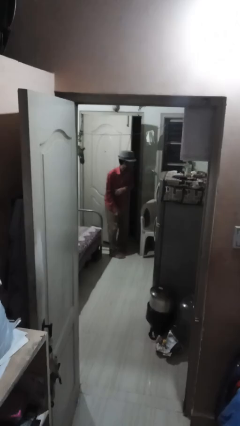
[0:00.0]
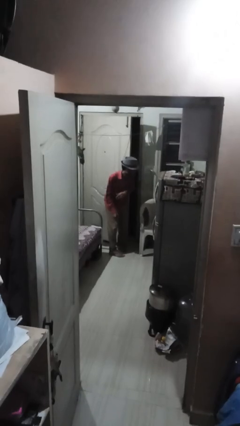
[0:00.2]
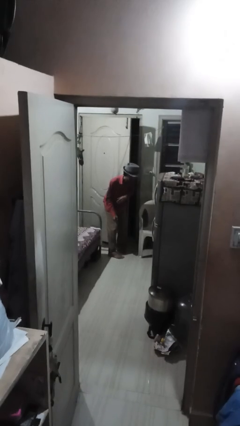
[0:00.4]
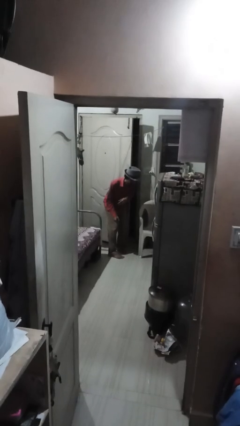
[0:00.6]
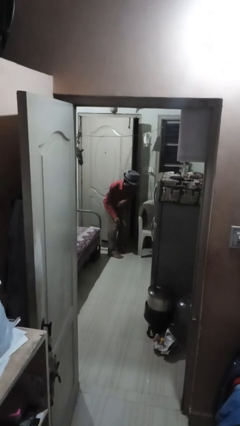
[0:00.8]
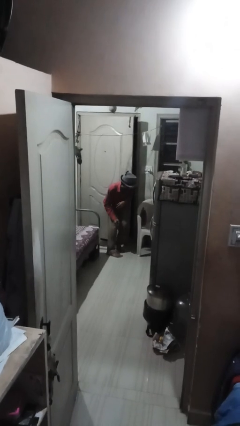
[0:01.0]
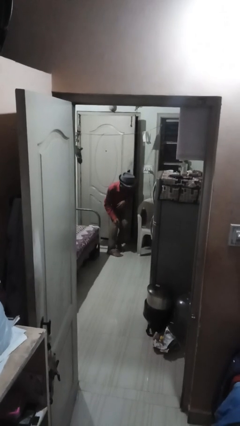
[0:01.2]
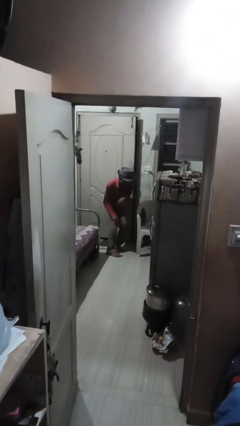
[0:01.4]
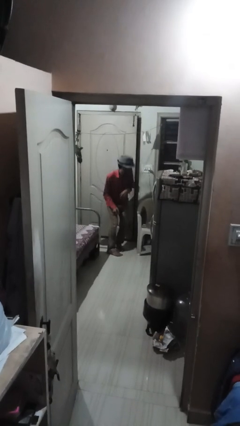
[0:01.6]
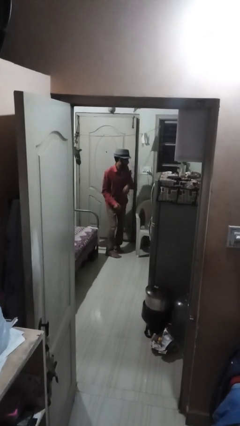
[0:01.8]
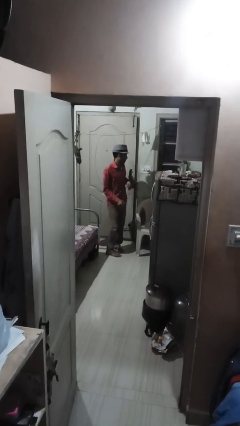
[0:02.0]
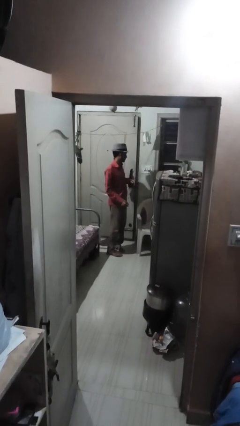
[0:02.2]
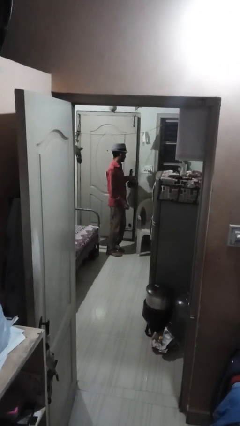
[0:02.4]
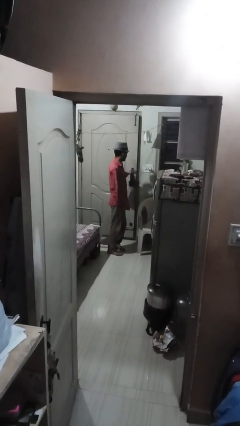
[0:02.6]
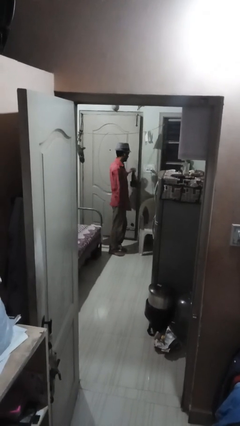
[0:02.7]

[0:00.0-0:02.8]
person closes door with hip

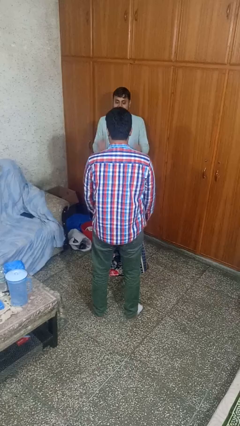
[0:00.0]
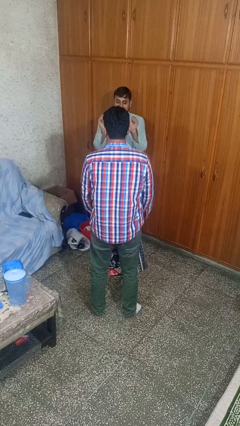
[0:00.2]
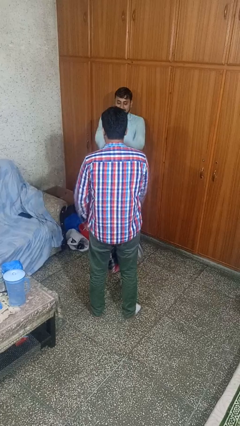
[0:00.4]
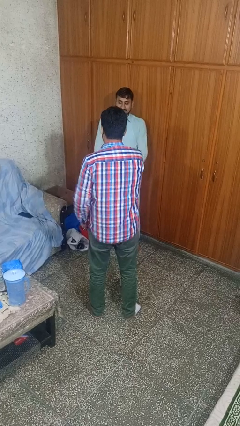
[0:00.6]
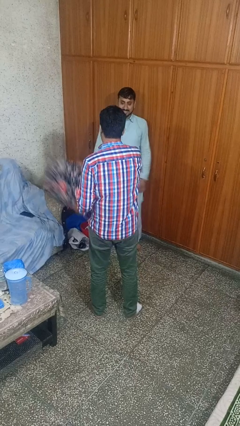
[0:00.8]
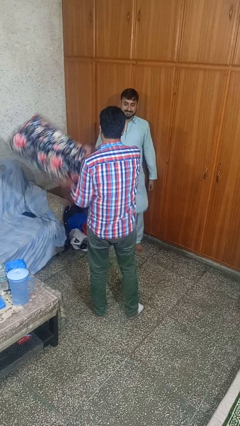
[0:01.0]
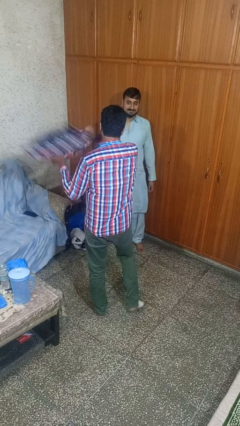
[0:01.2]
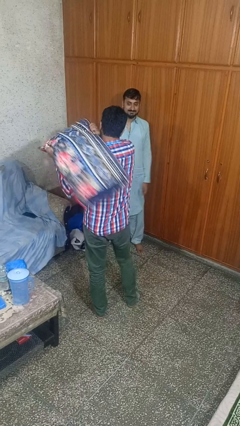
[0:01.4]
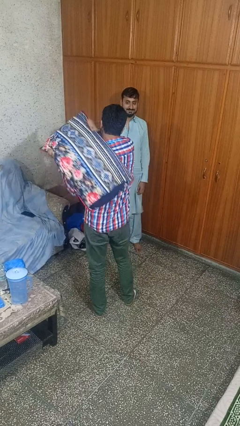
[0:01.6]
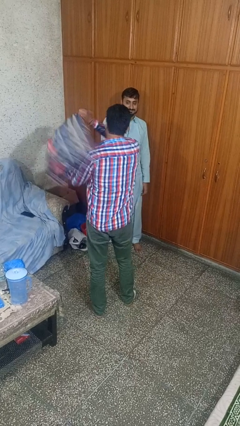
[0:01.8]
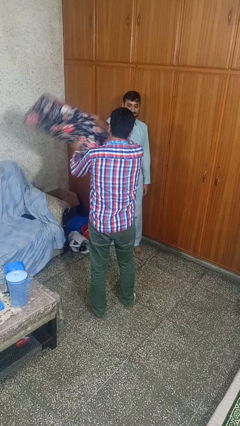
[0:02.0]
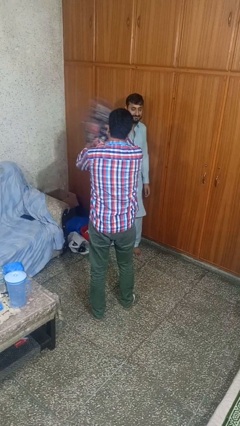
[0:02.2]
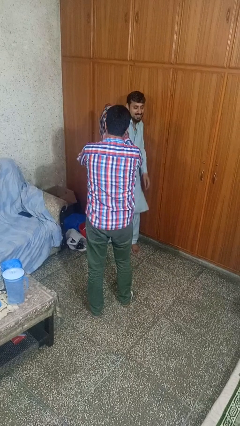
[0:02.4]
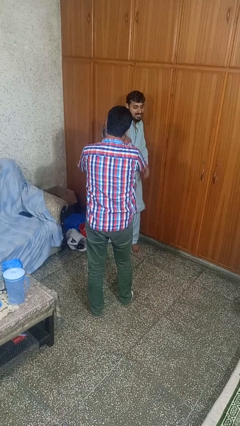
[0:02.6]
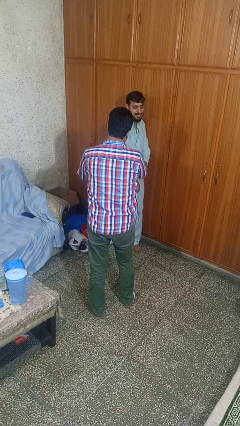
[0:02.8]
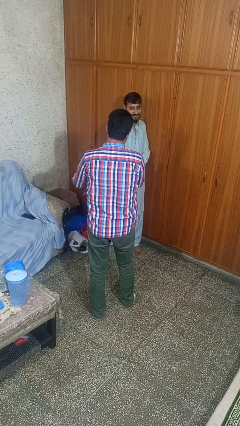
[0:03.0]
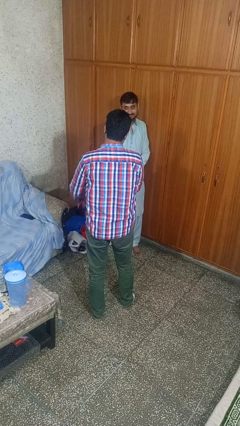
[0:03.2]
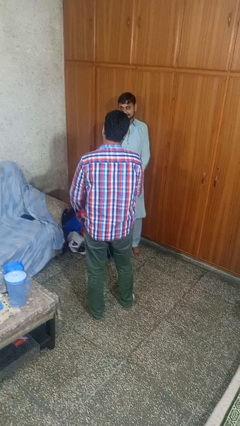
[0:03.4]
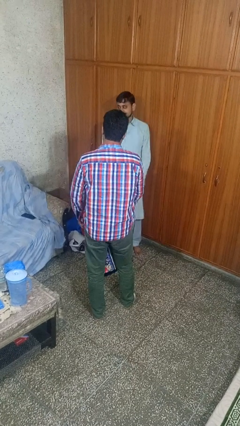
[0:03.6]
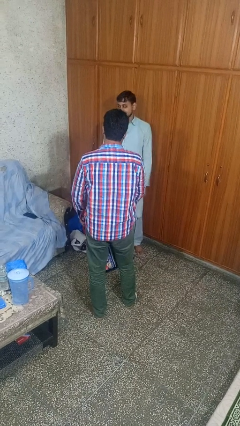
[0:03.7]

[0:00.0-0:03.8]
person hits person with pillow

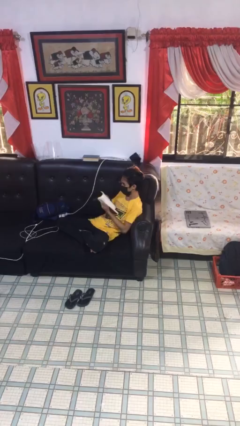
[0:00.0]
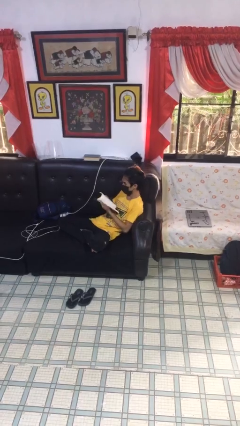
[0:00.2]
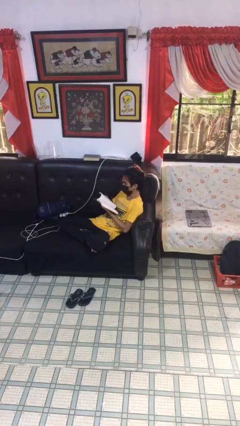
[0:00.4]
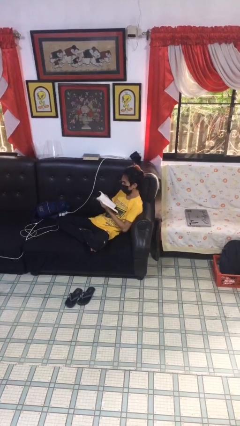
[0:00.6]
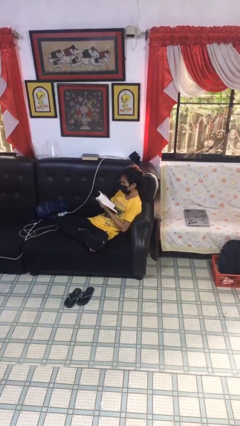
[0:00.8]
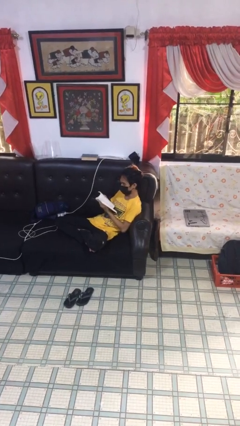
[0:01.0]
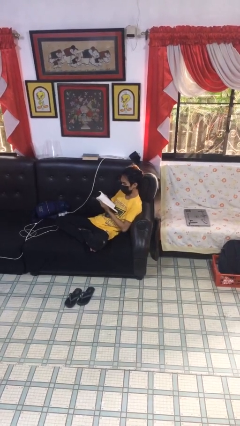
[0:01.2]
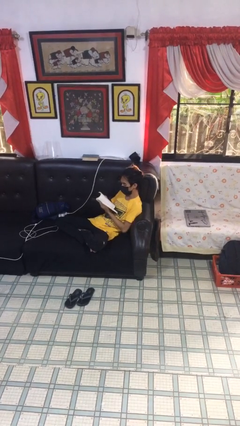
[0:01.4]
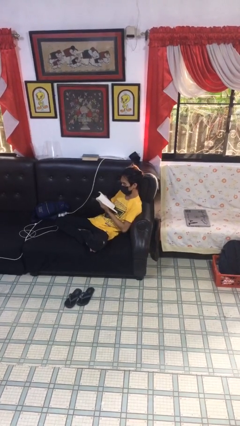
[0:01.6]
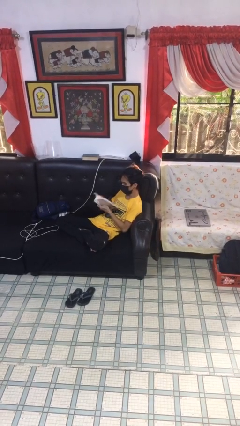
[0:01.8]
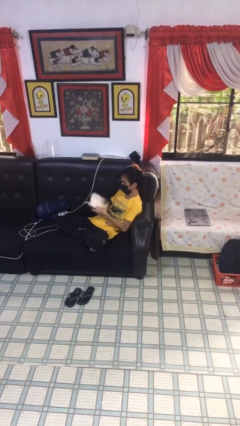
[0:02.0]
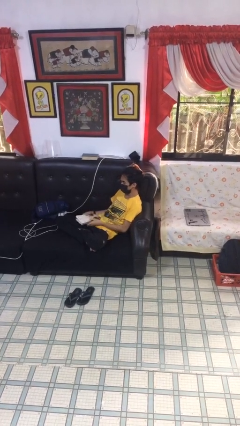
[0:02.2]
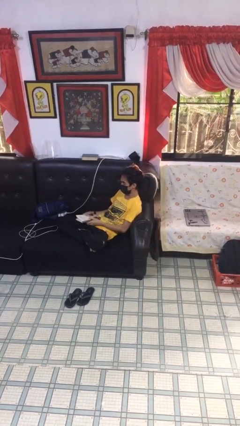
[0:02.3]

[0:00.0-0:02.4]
person reads document

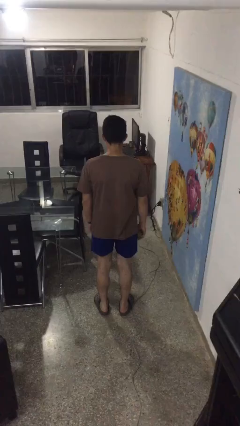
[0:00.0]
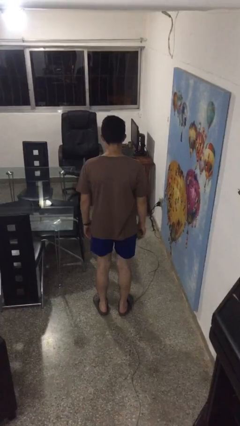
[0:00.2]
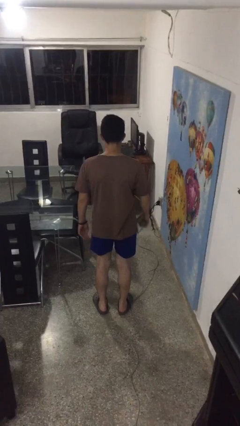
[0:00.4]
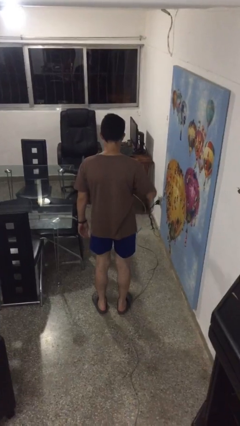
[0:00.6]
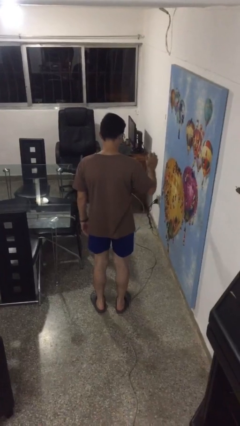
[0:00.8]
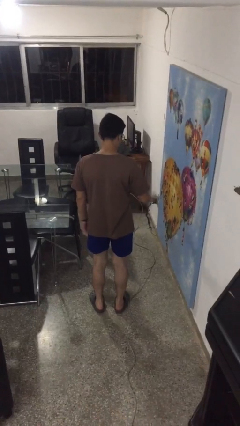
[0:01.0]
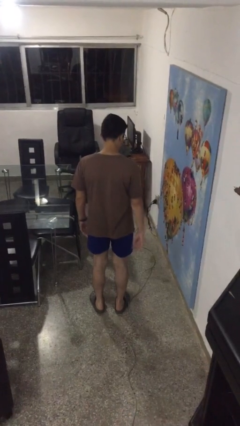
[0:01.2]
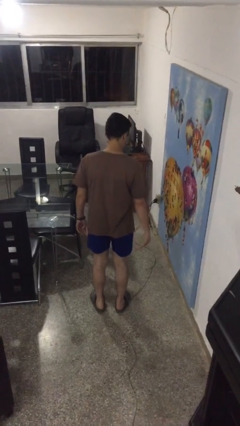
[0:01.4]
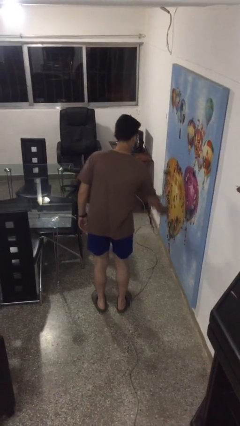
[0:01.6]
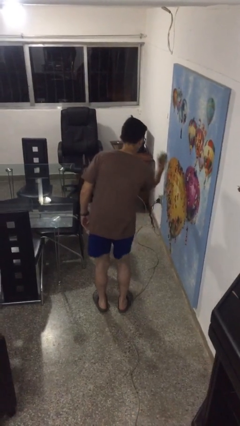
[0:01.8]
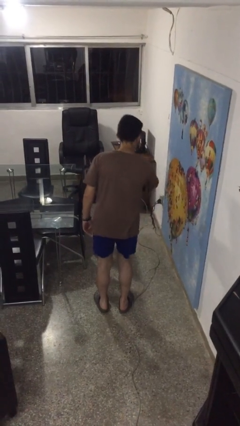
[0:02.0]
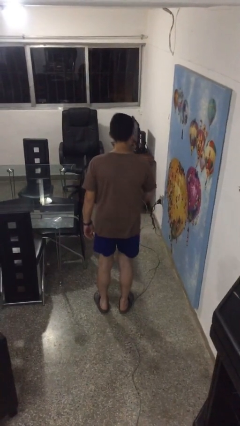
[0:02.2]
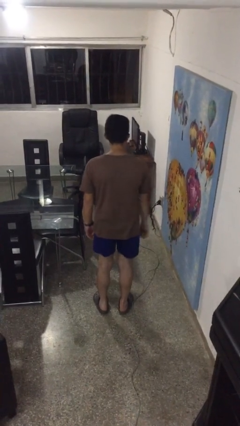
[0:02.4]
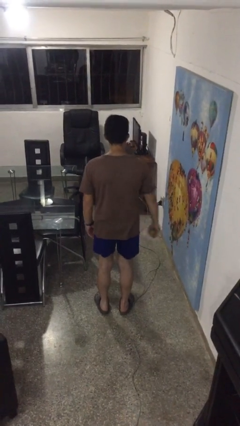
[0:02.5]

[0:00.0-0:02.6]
person bounces ball on floor

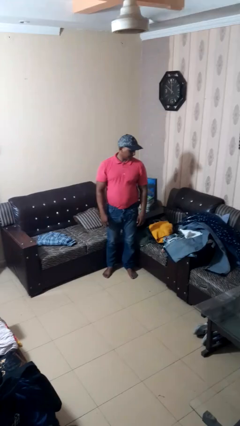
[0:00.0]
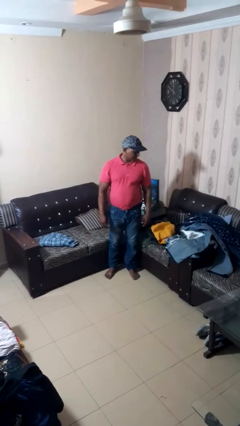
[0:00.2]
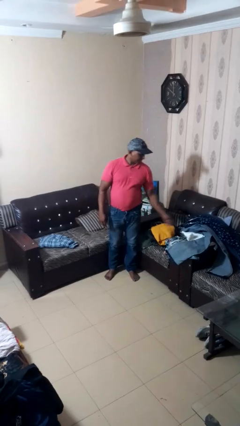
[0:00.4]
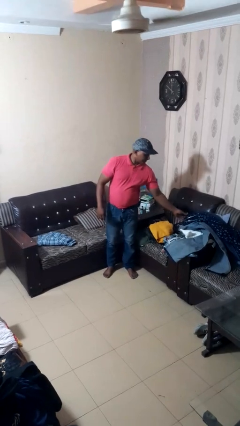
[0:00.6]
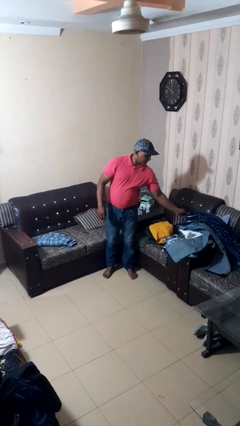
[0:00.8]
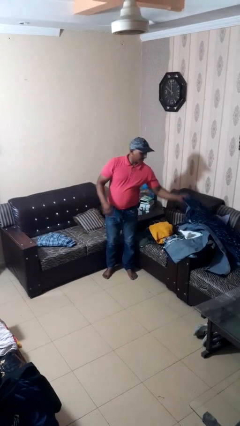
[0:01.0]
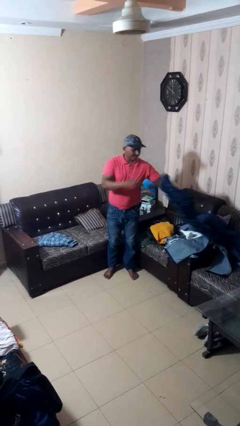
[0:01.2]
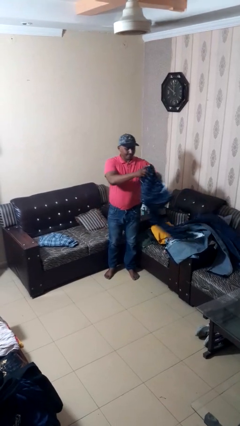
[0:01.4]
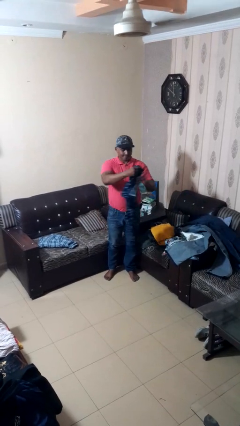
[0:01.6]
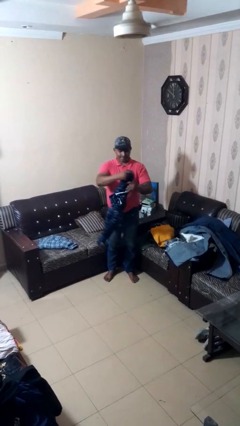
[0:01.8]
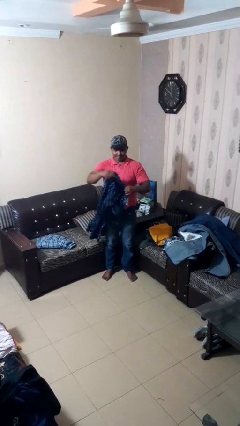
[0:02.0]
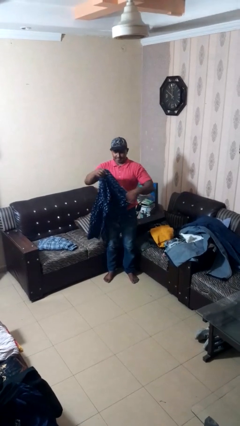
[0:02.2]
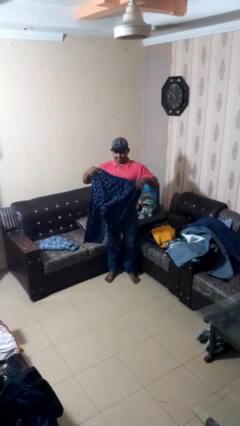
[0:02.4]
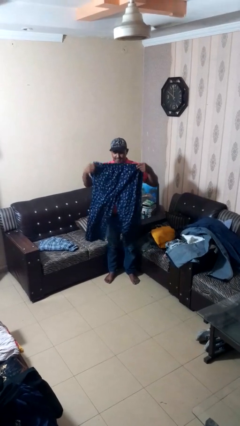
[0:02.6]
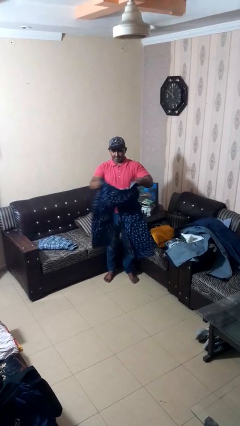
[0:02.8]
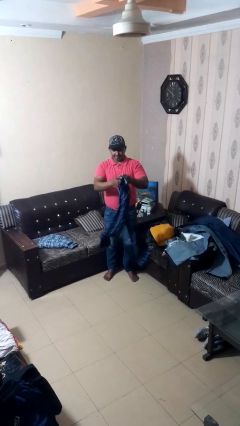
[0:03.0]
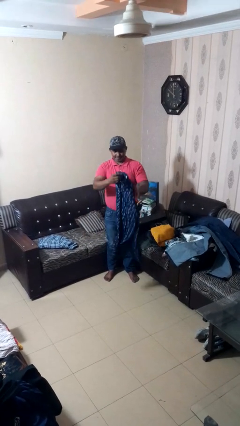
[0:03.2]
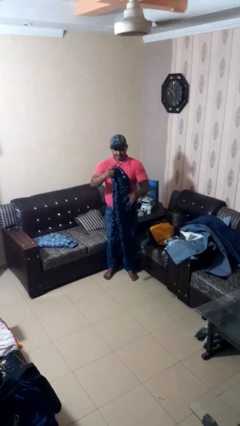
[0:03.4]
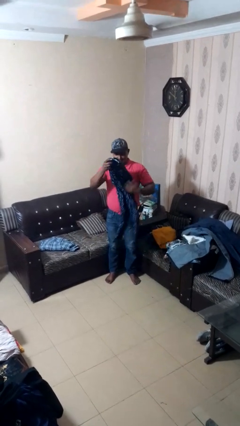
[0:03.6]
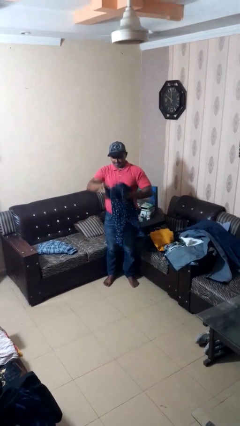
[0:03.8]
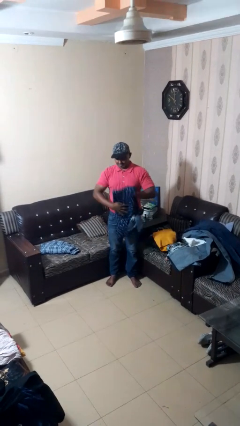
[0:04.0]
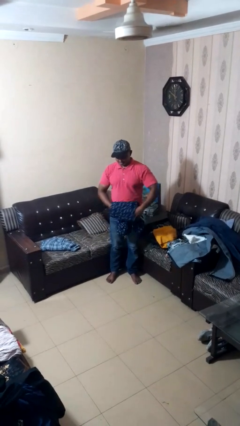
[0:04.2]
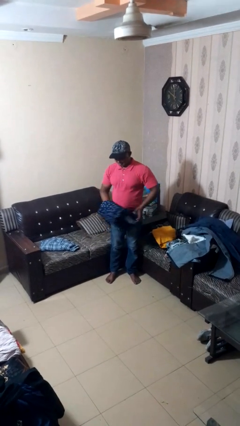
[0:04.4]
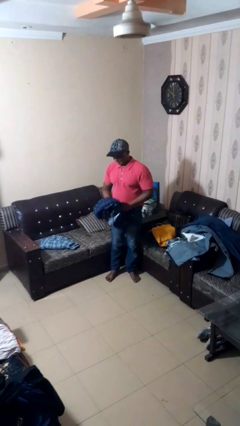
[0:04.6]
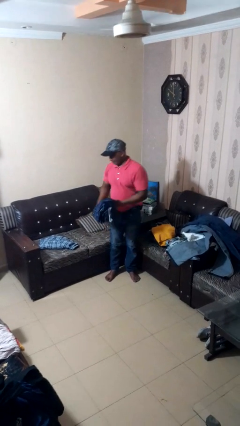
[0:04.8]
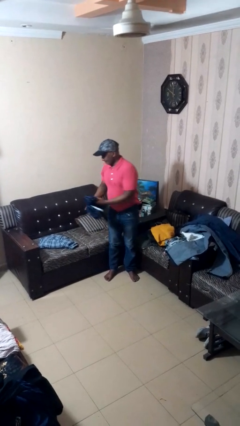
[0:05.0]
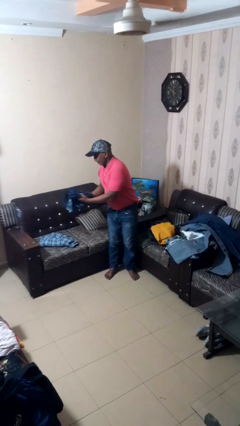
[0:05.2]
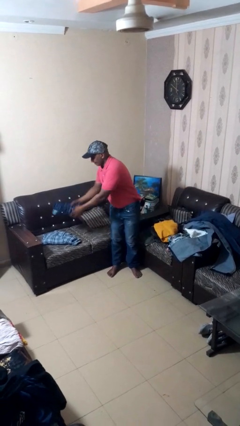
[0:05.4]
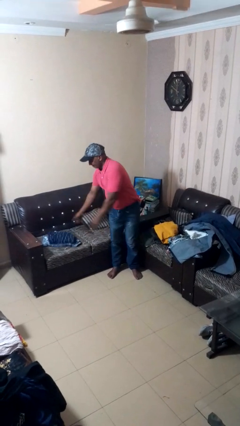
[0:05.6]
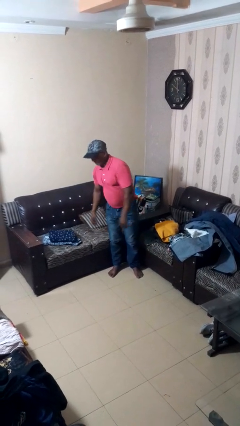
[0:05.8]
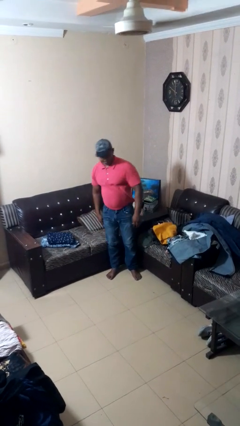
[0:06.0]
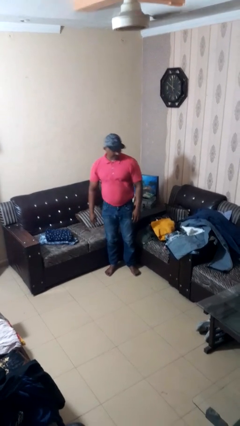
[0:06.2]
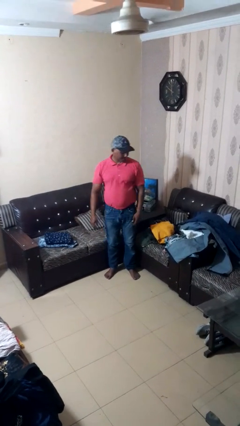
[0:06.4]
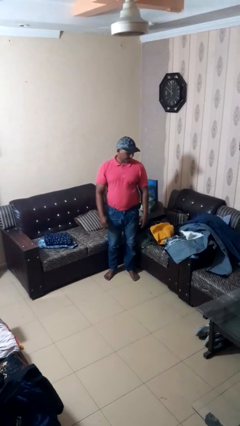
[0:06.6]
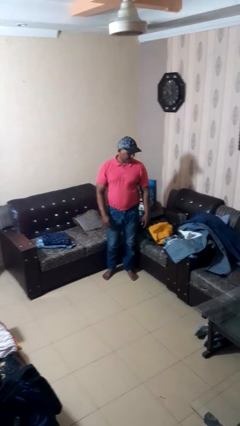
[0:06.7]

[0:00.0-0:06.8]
person folds pants
